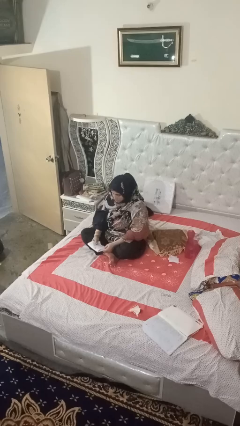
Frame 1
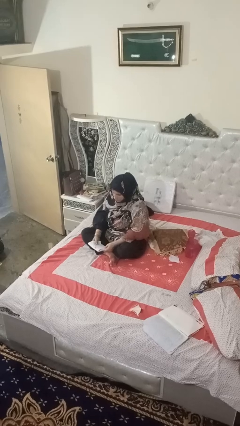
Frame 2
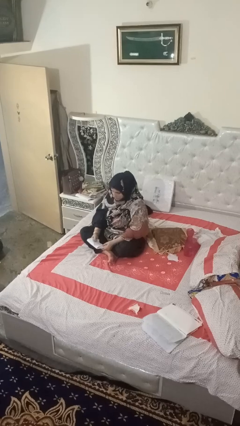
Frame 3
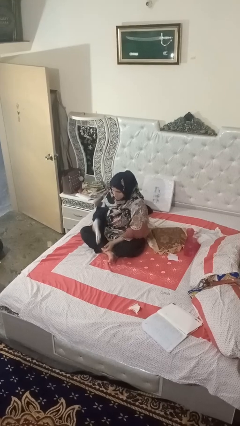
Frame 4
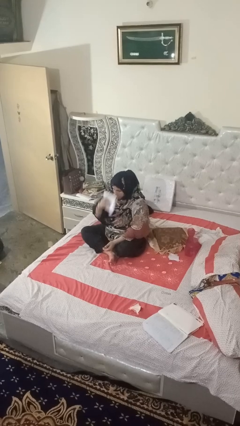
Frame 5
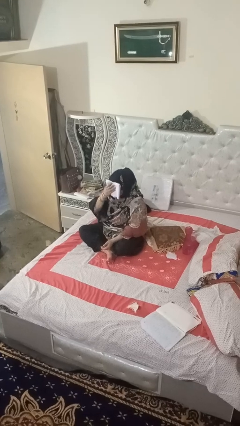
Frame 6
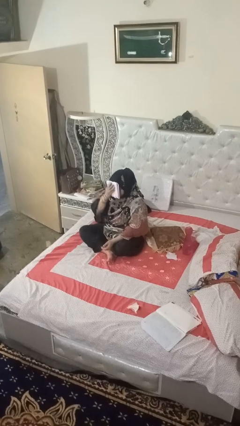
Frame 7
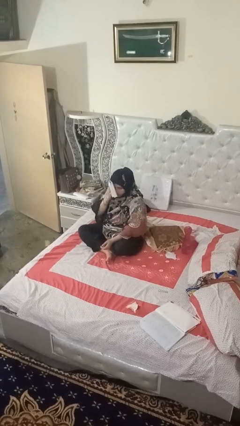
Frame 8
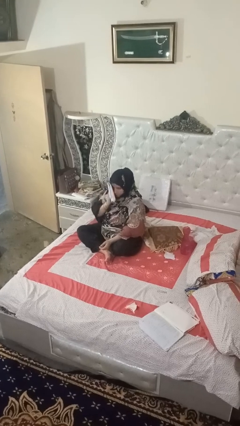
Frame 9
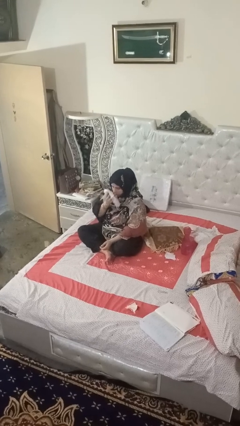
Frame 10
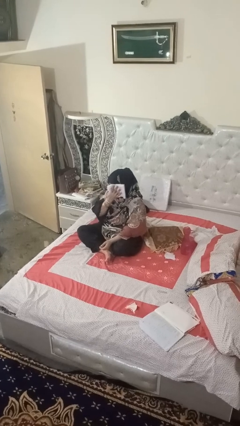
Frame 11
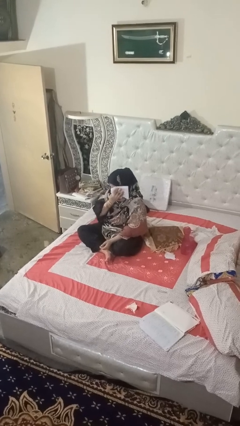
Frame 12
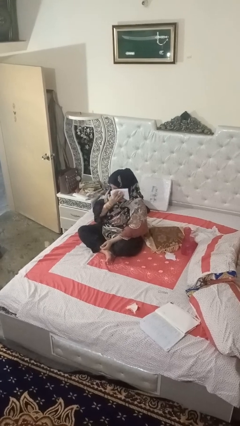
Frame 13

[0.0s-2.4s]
person wipes mouth with napkin

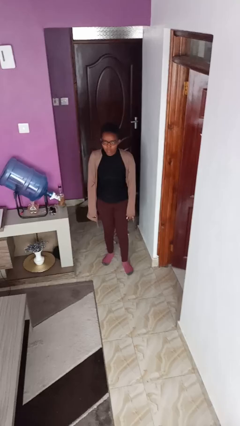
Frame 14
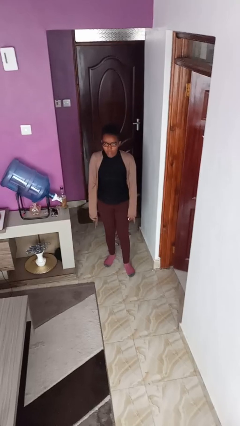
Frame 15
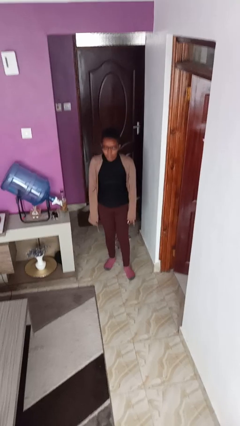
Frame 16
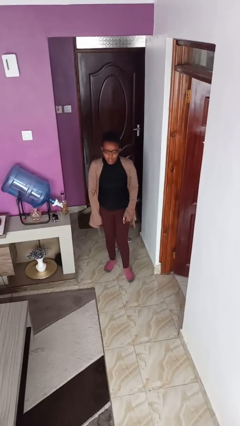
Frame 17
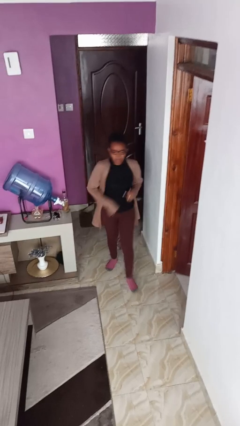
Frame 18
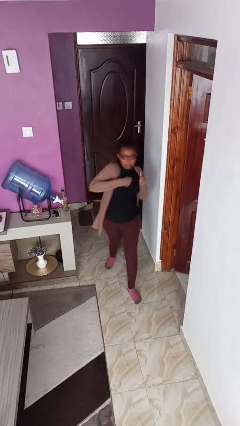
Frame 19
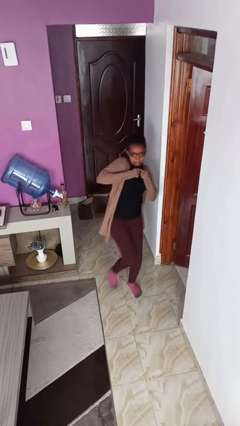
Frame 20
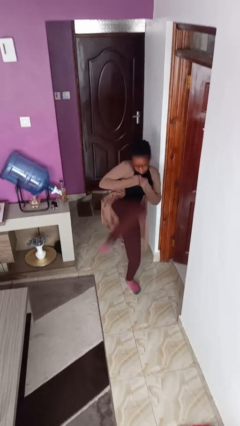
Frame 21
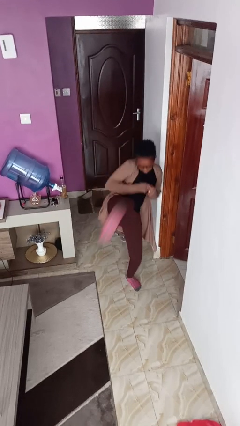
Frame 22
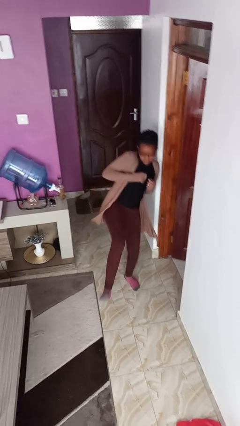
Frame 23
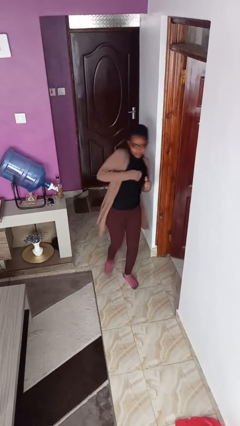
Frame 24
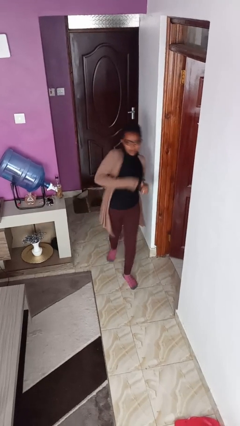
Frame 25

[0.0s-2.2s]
person karate kicks

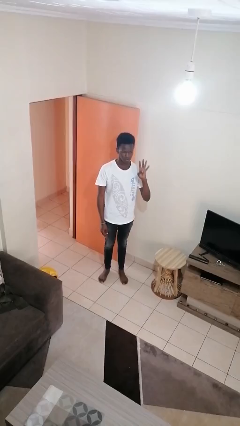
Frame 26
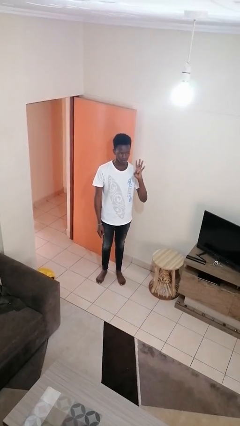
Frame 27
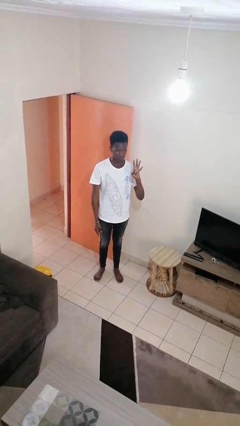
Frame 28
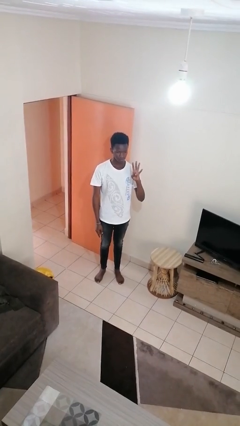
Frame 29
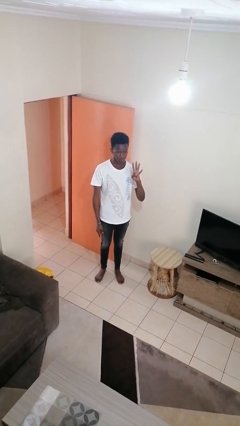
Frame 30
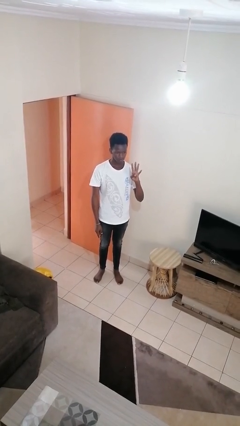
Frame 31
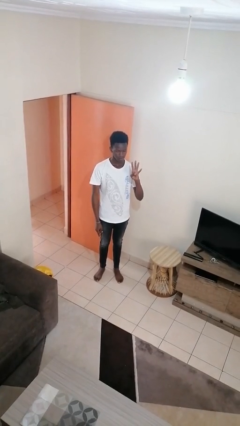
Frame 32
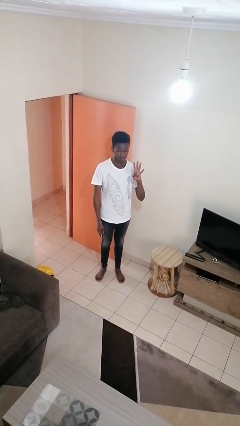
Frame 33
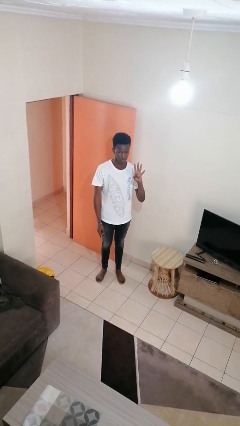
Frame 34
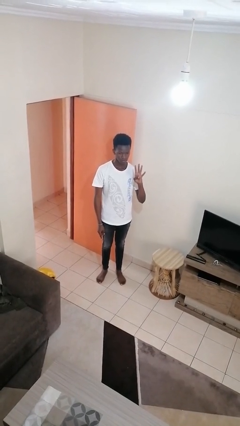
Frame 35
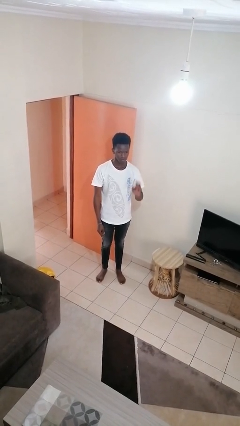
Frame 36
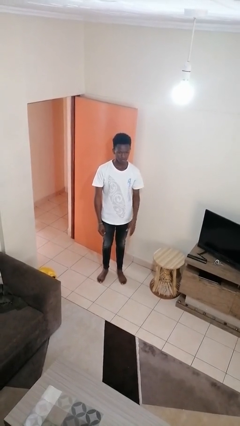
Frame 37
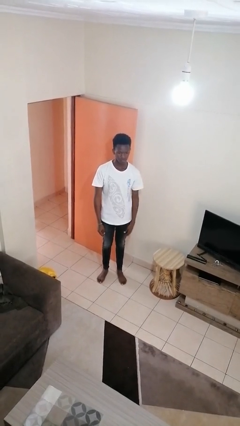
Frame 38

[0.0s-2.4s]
person gestures number four

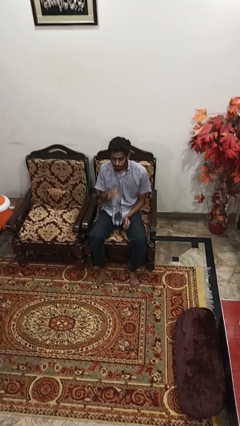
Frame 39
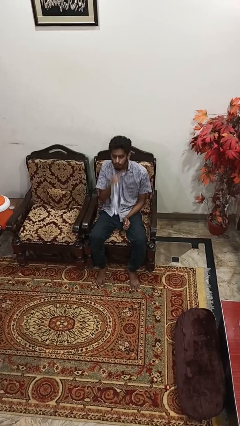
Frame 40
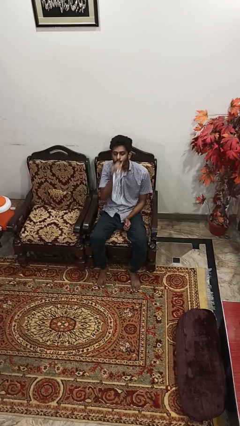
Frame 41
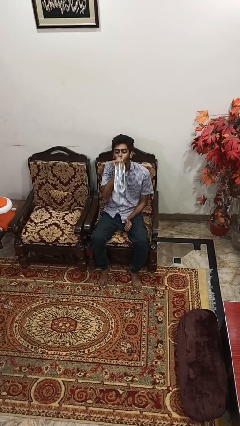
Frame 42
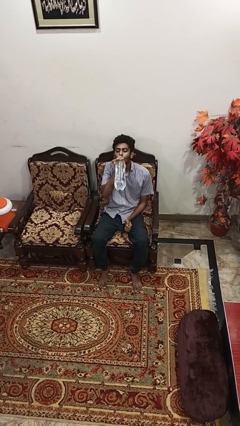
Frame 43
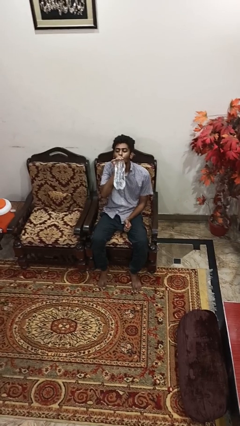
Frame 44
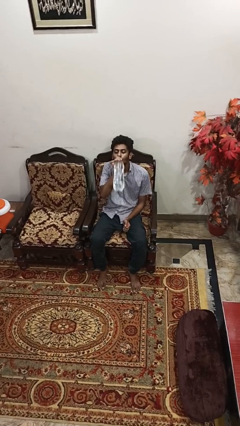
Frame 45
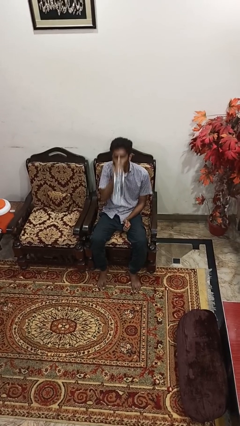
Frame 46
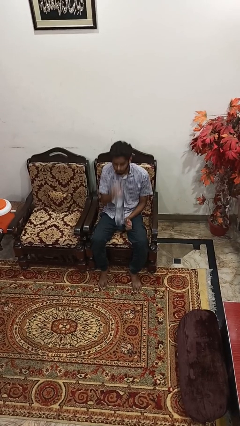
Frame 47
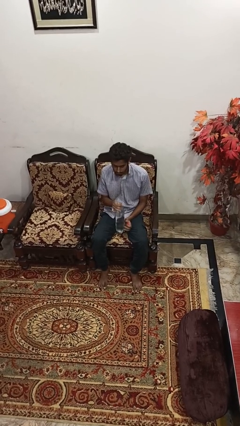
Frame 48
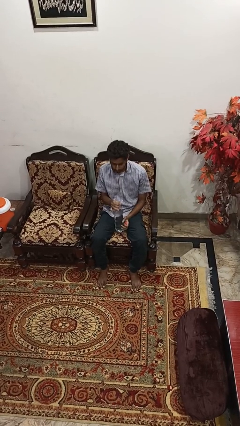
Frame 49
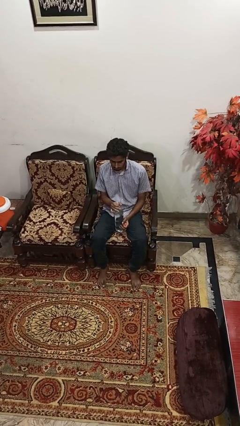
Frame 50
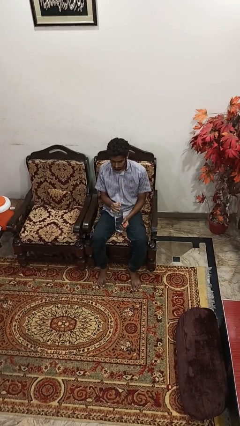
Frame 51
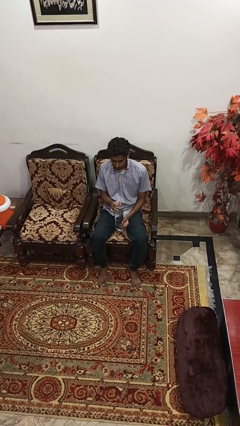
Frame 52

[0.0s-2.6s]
person drinks from bottle

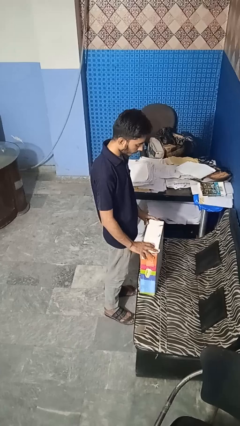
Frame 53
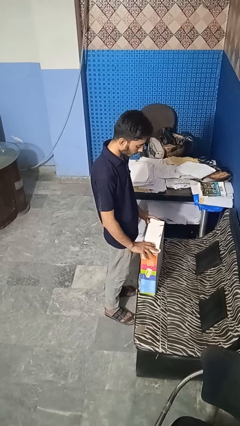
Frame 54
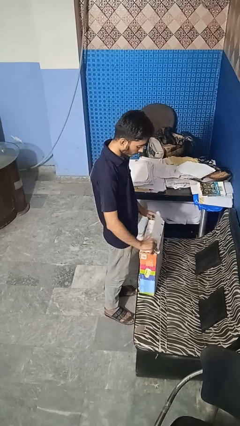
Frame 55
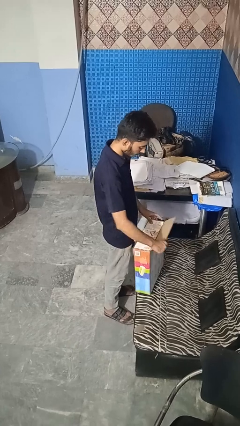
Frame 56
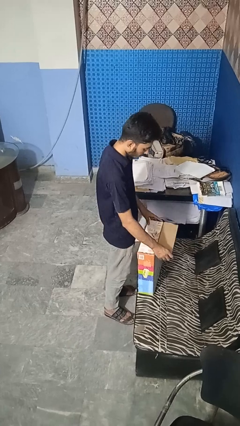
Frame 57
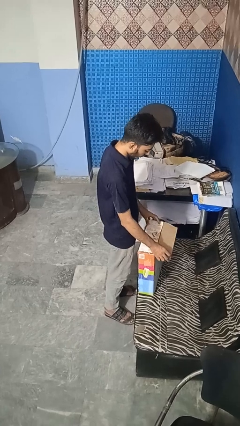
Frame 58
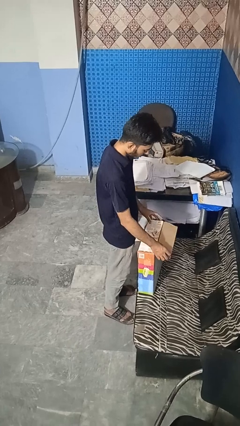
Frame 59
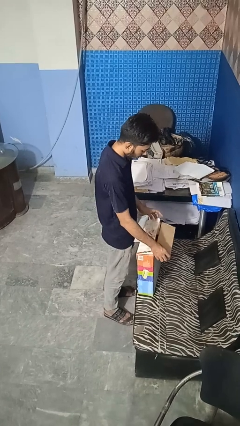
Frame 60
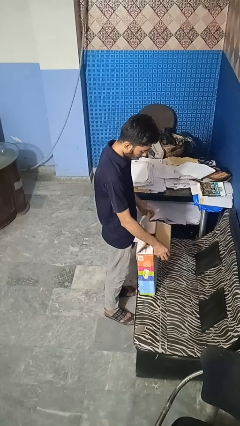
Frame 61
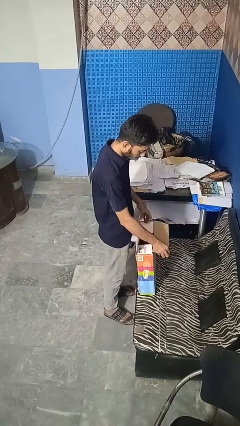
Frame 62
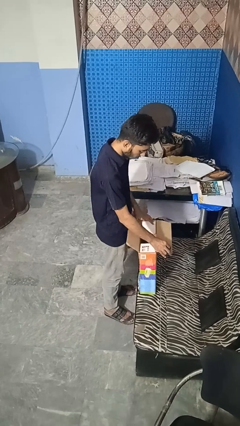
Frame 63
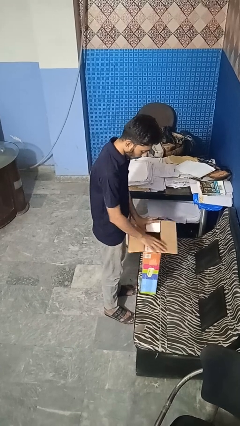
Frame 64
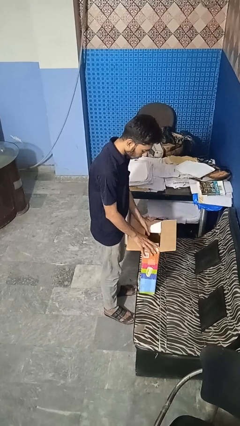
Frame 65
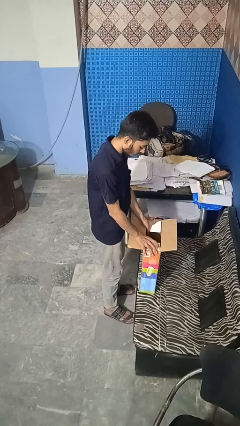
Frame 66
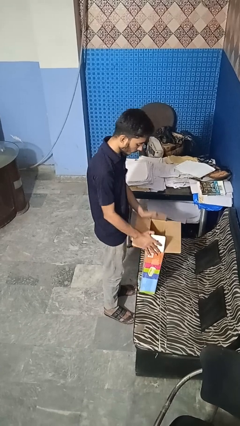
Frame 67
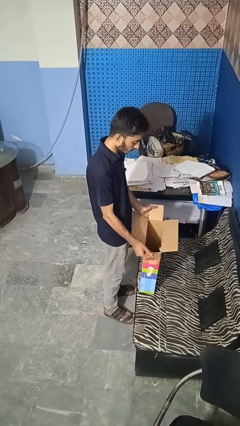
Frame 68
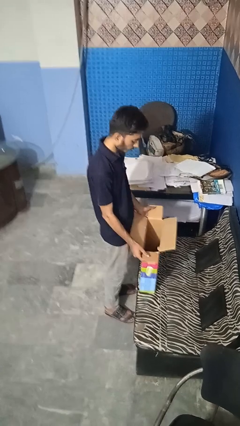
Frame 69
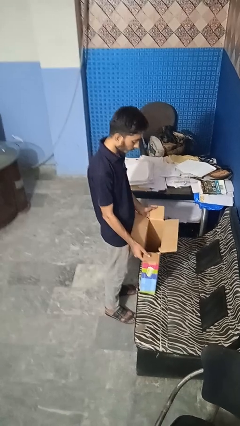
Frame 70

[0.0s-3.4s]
person opens box

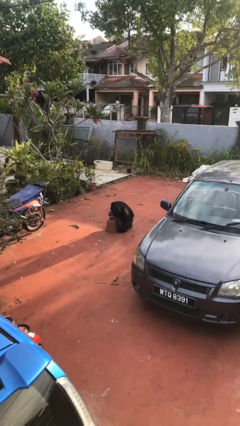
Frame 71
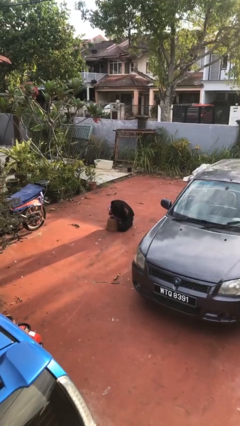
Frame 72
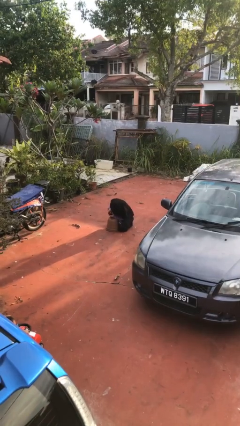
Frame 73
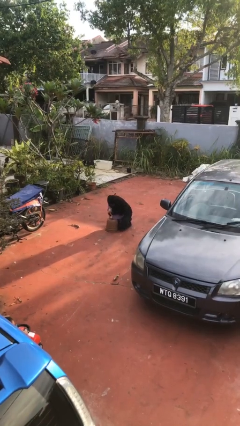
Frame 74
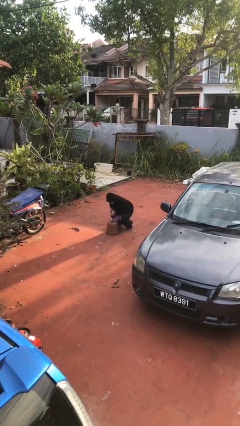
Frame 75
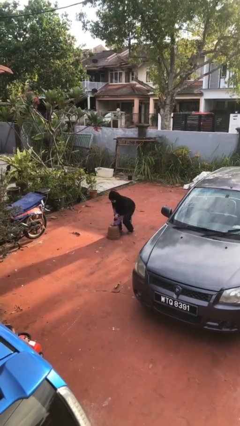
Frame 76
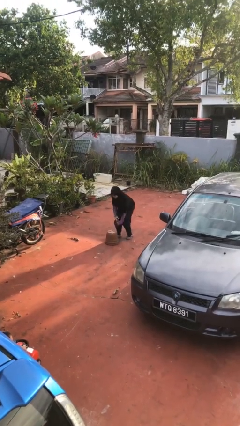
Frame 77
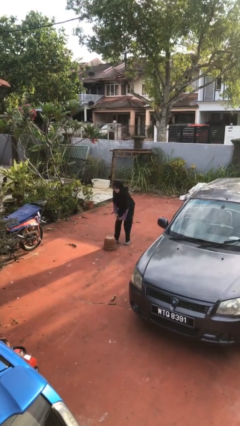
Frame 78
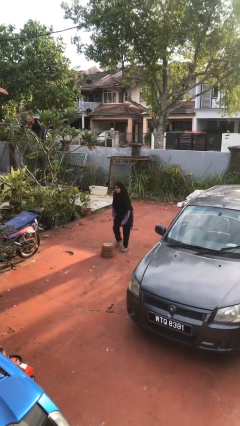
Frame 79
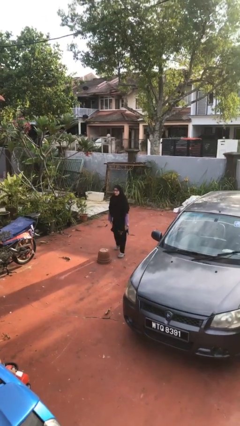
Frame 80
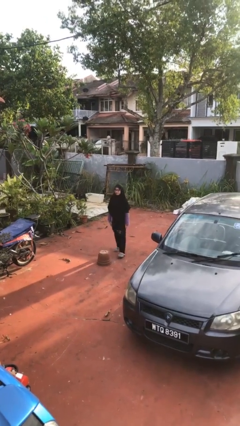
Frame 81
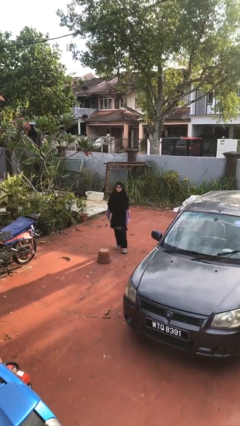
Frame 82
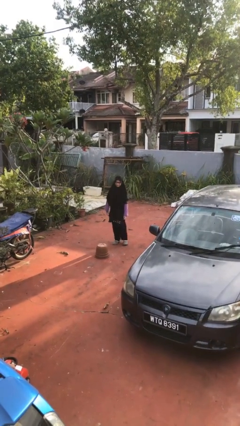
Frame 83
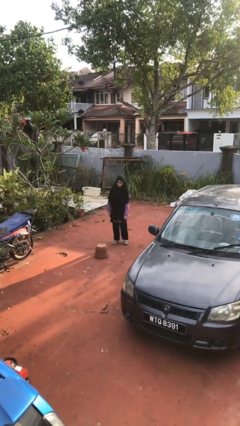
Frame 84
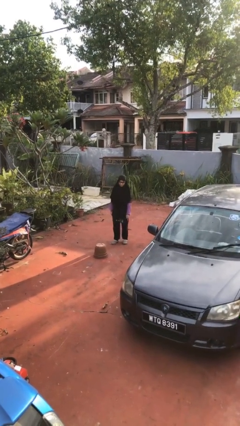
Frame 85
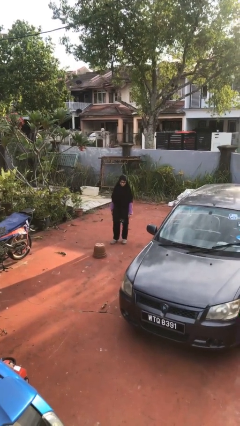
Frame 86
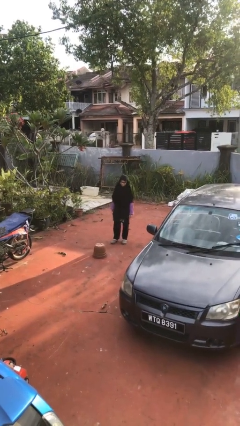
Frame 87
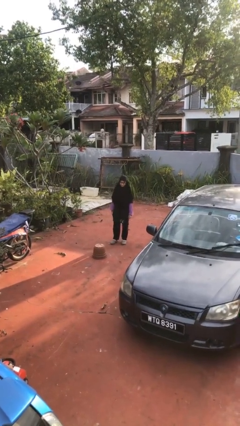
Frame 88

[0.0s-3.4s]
person stands up from floor

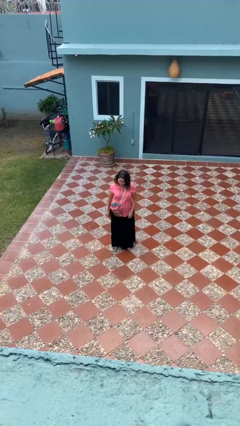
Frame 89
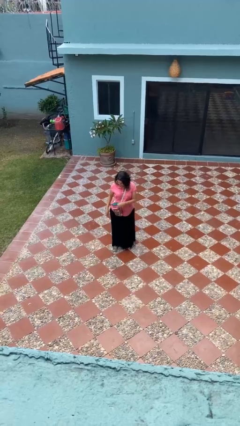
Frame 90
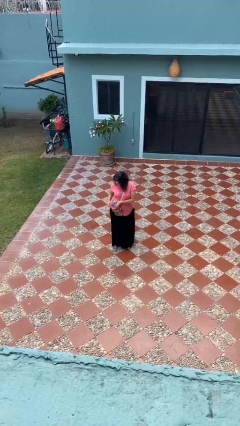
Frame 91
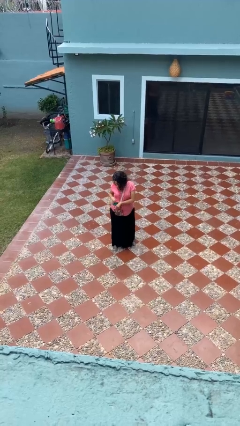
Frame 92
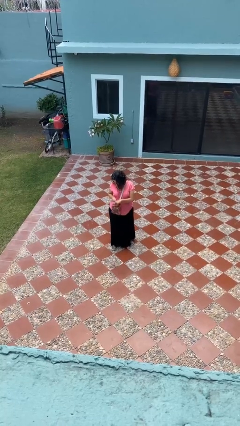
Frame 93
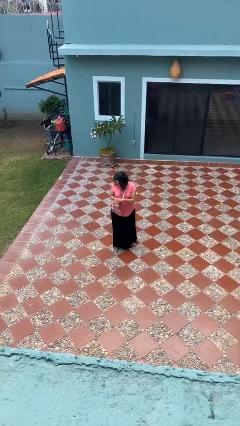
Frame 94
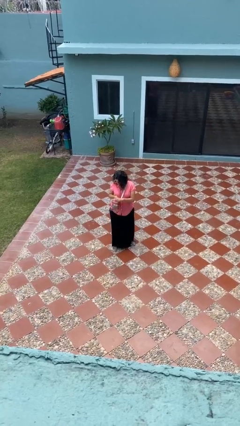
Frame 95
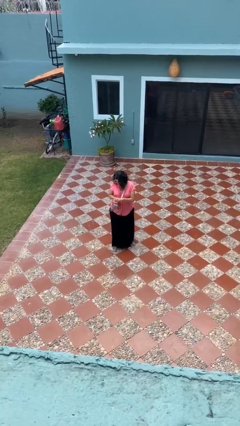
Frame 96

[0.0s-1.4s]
person searches in purse
